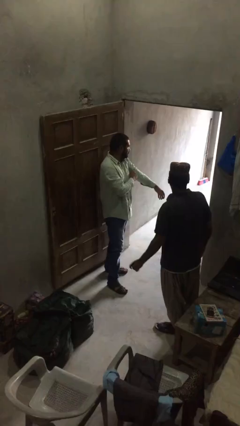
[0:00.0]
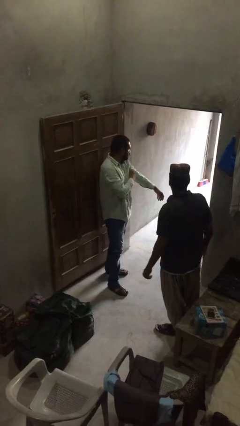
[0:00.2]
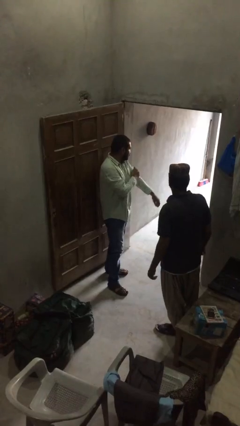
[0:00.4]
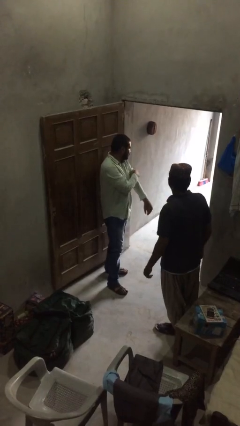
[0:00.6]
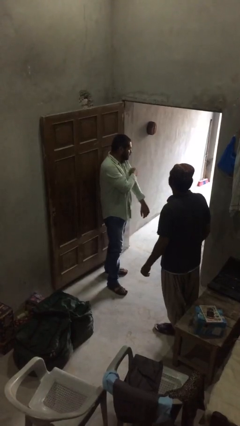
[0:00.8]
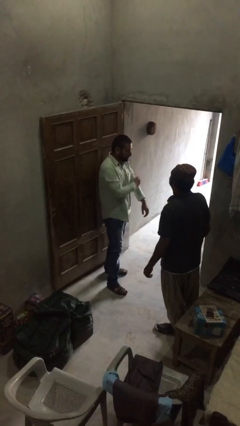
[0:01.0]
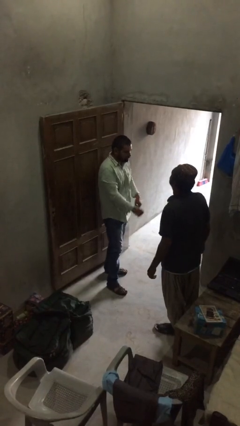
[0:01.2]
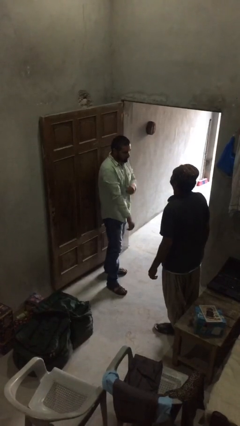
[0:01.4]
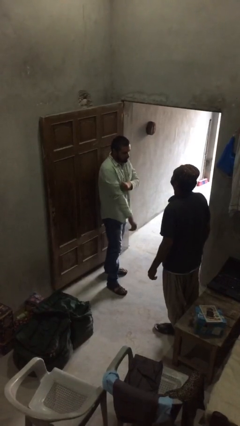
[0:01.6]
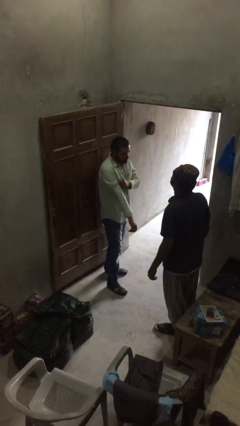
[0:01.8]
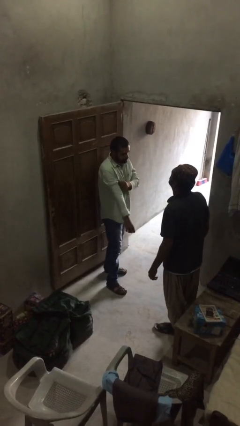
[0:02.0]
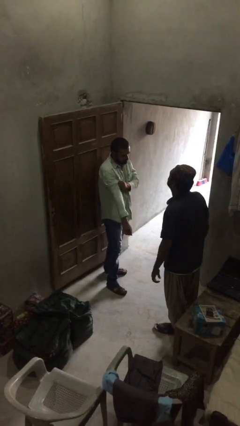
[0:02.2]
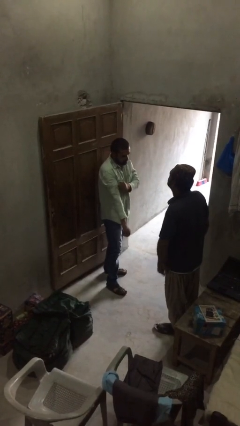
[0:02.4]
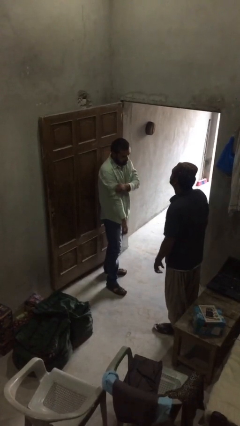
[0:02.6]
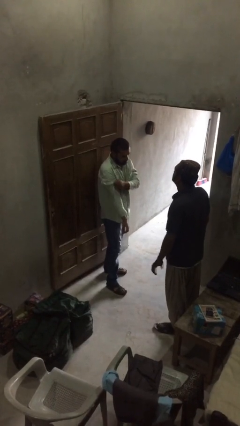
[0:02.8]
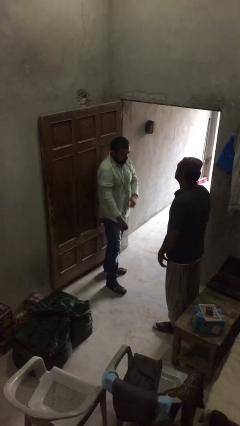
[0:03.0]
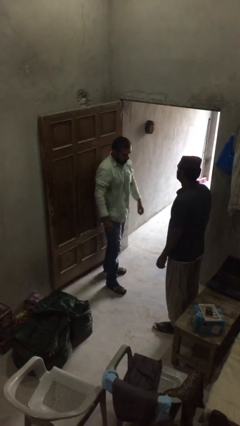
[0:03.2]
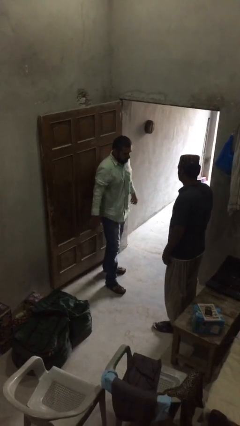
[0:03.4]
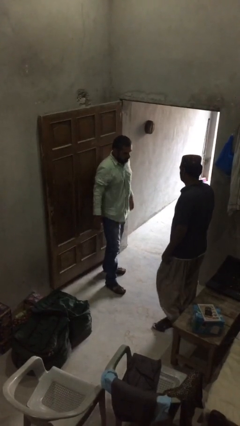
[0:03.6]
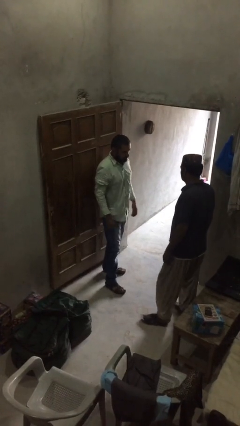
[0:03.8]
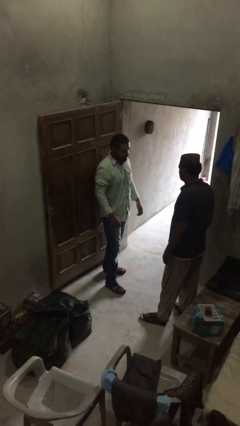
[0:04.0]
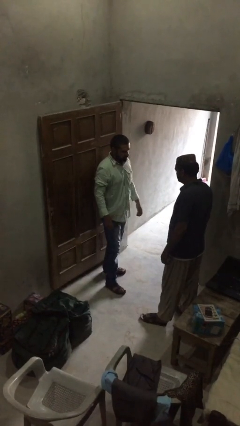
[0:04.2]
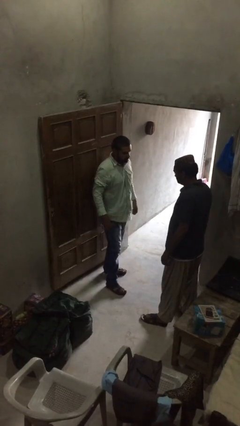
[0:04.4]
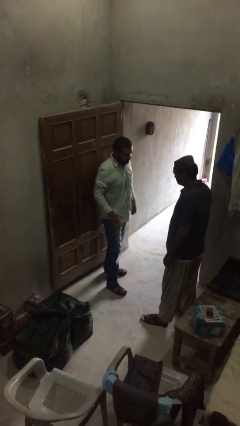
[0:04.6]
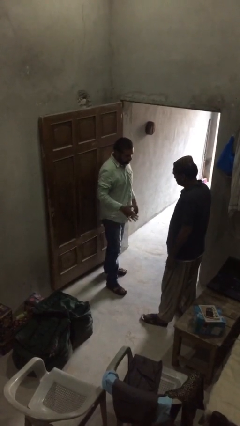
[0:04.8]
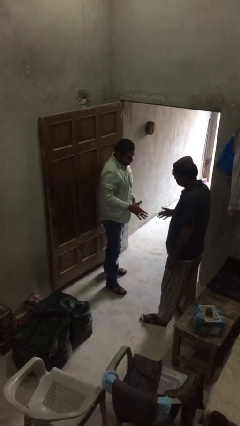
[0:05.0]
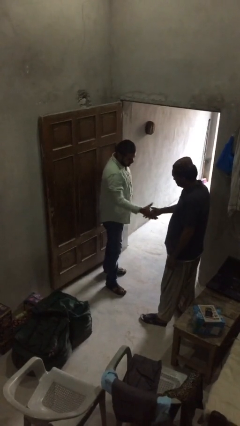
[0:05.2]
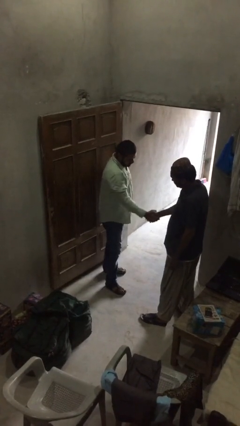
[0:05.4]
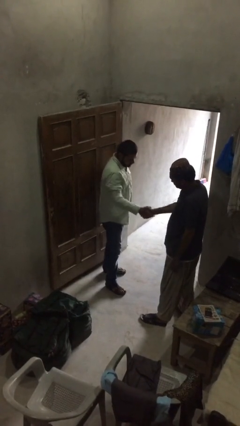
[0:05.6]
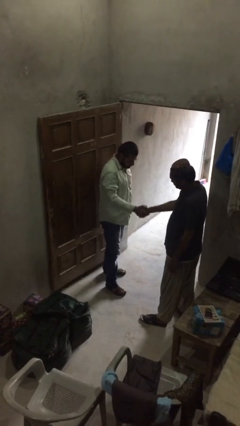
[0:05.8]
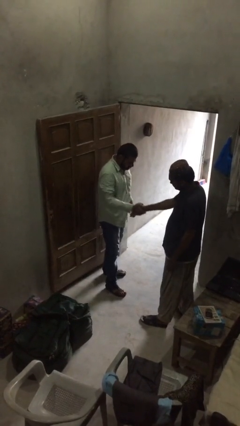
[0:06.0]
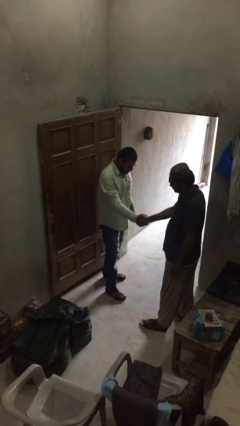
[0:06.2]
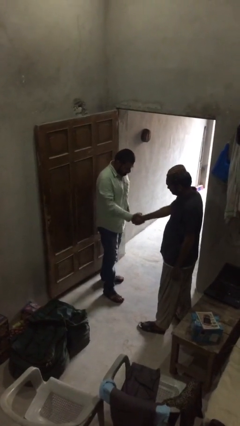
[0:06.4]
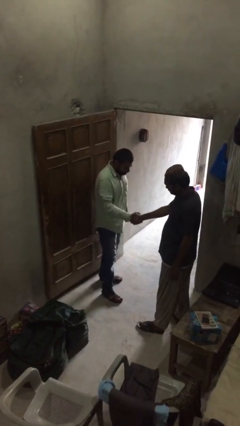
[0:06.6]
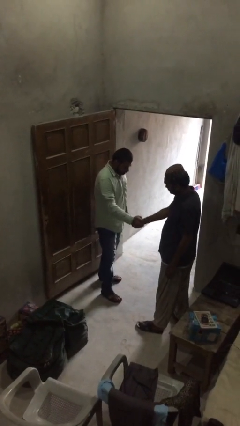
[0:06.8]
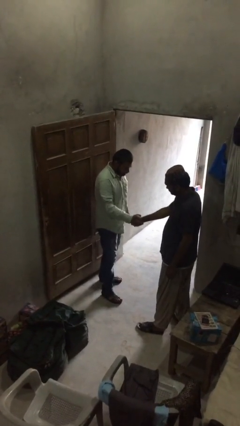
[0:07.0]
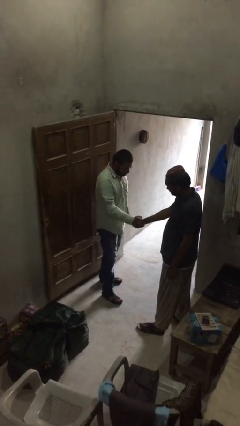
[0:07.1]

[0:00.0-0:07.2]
person shakes hand

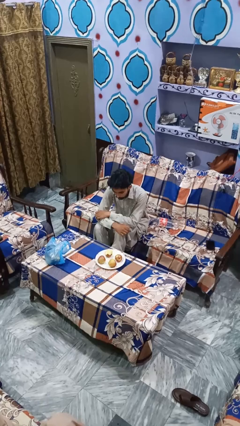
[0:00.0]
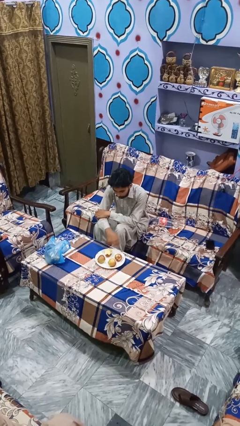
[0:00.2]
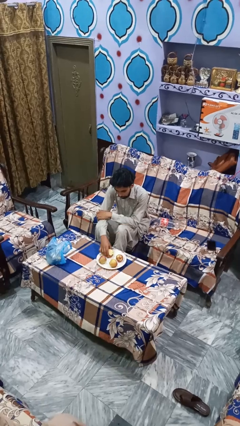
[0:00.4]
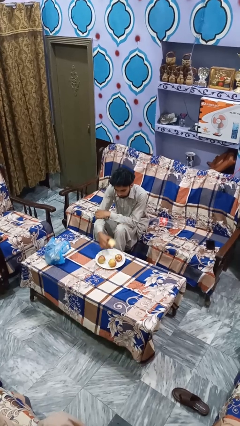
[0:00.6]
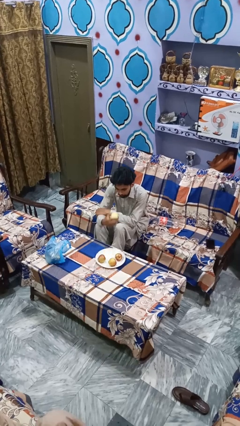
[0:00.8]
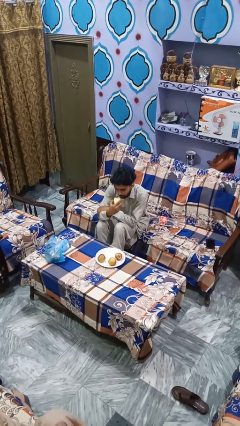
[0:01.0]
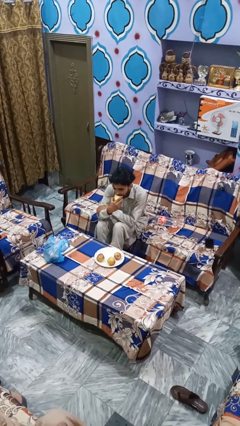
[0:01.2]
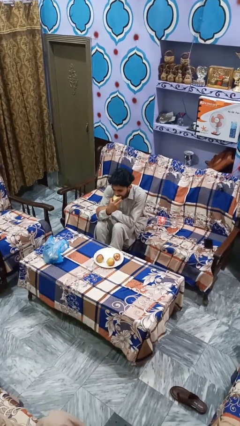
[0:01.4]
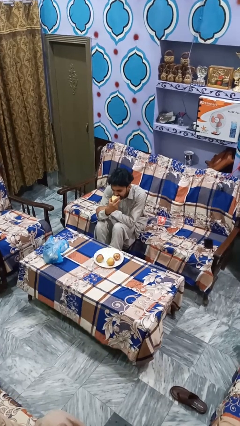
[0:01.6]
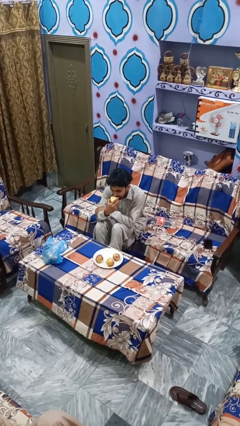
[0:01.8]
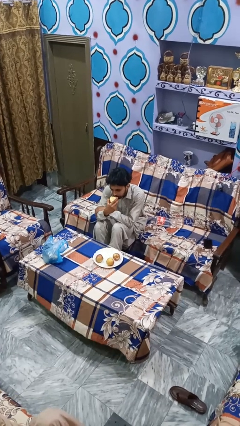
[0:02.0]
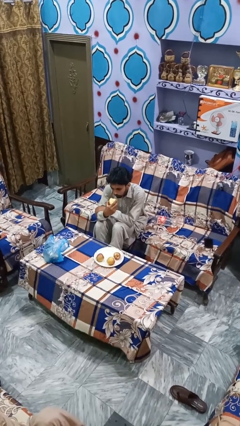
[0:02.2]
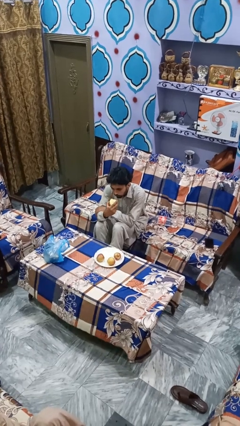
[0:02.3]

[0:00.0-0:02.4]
person eats apple

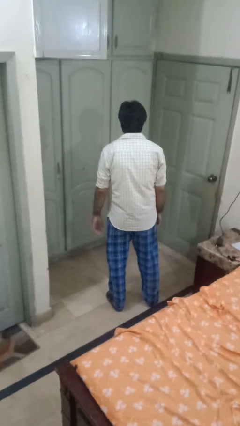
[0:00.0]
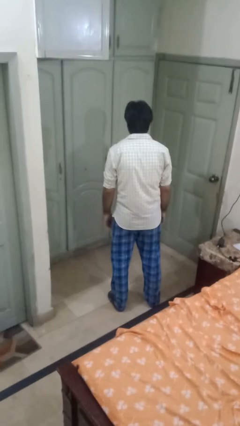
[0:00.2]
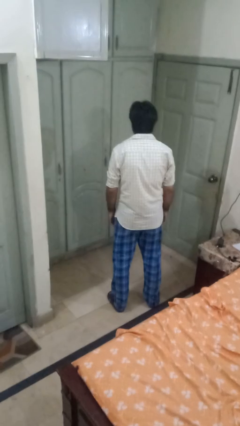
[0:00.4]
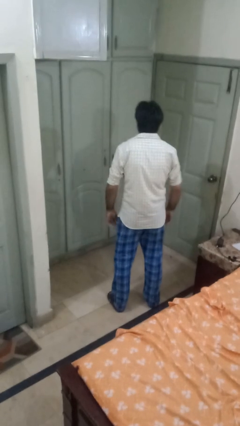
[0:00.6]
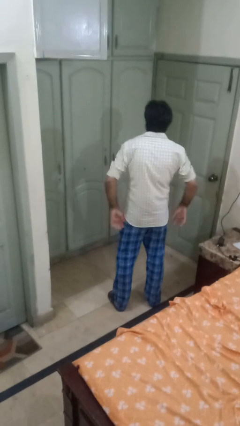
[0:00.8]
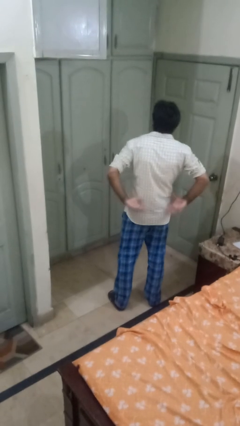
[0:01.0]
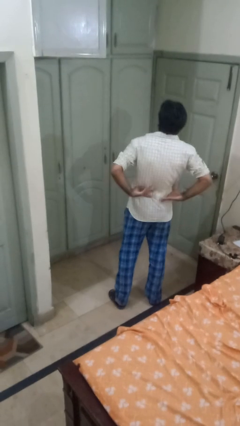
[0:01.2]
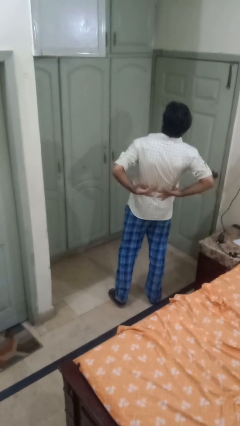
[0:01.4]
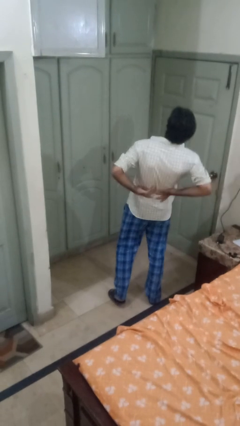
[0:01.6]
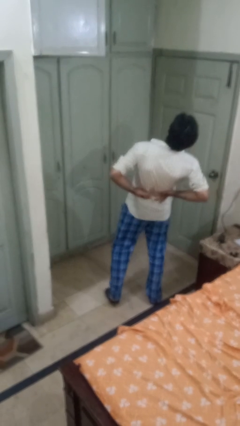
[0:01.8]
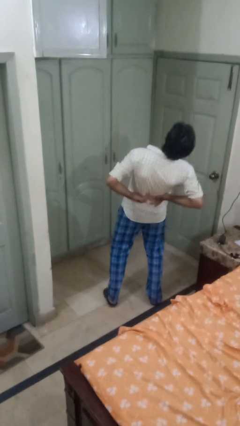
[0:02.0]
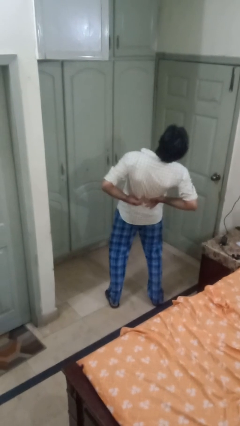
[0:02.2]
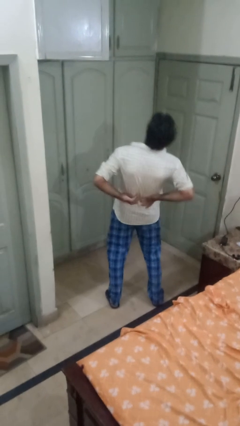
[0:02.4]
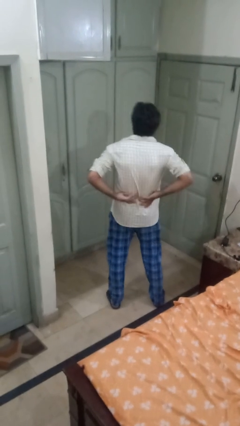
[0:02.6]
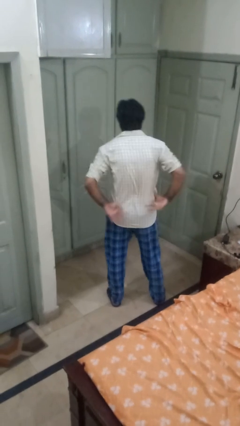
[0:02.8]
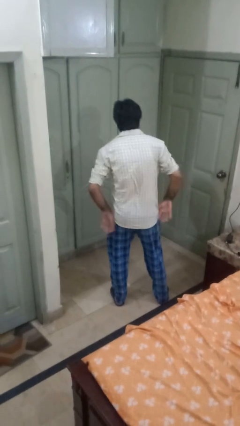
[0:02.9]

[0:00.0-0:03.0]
person stretches back

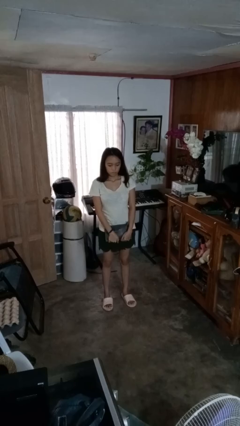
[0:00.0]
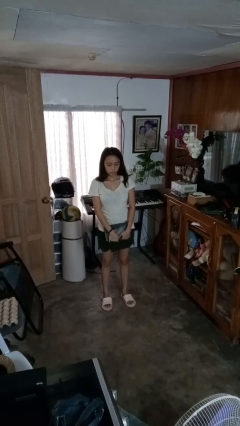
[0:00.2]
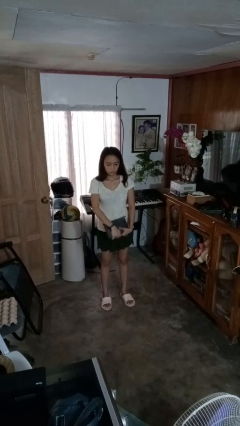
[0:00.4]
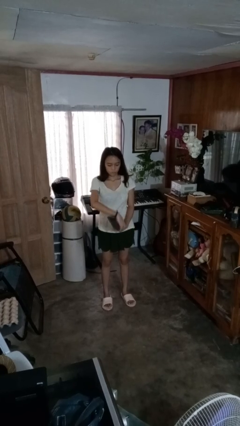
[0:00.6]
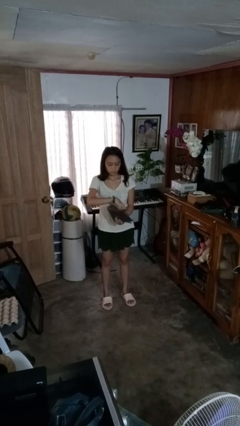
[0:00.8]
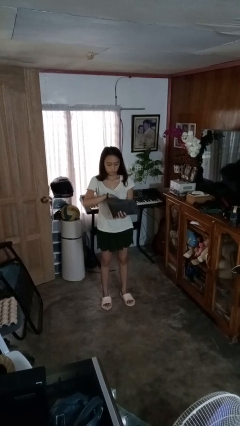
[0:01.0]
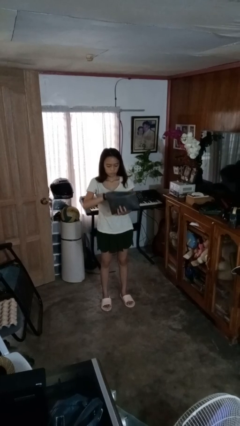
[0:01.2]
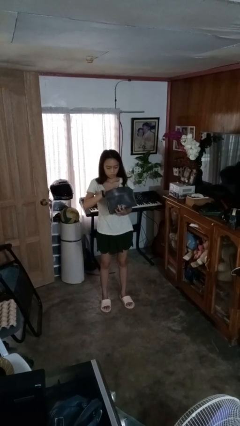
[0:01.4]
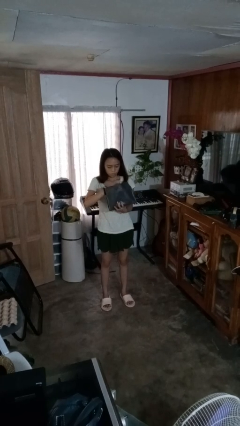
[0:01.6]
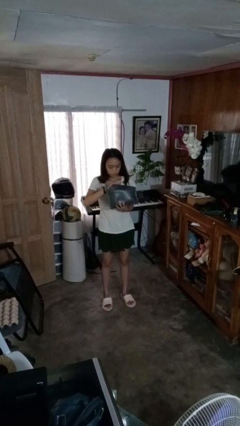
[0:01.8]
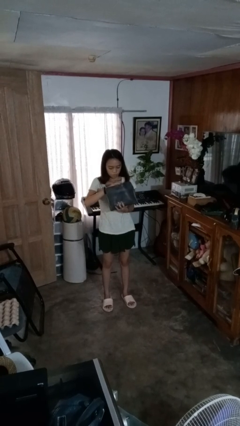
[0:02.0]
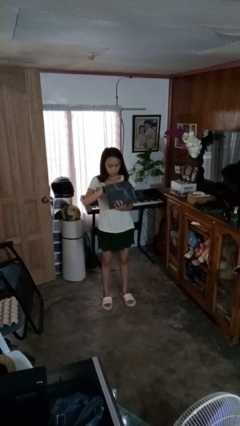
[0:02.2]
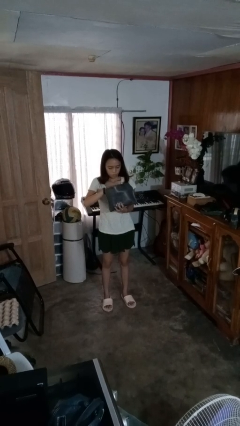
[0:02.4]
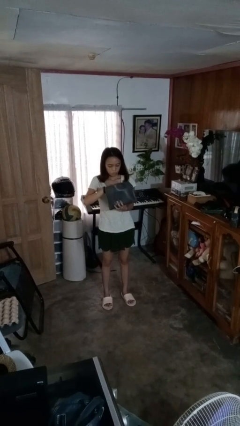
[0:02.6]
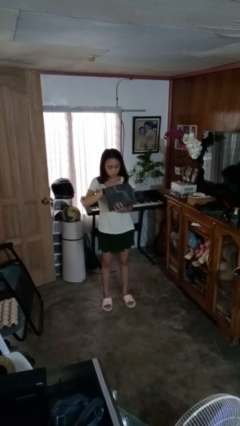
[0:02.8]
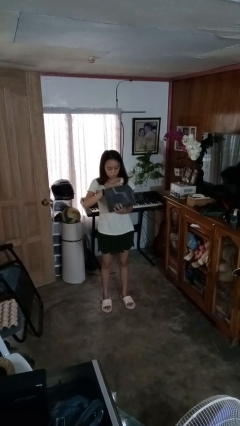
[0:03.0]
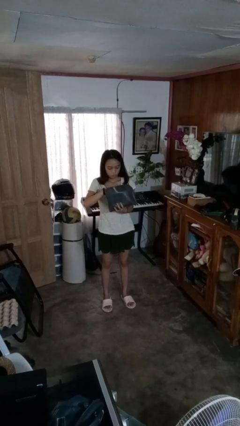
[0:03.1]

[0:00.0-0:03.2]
person searches in purse

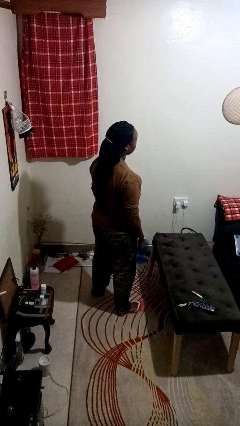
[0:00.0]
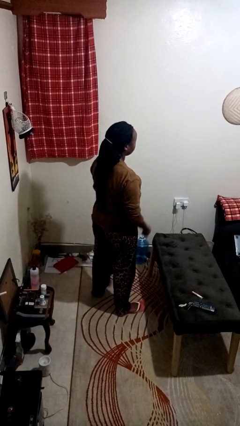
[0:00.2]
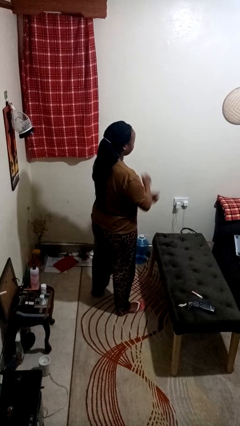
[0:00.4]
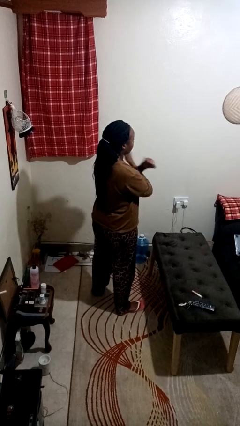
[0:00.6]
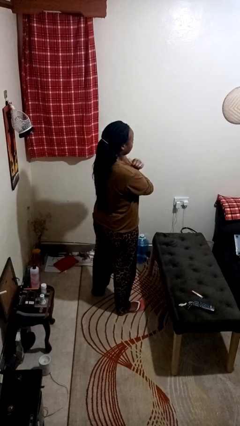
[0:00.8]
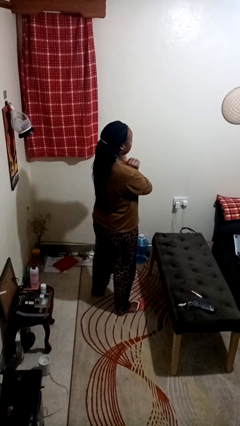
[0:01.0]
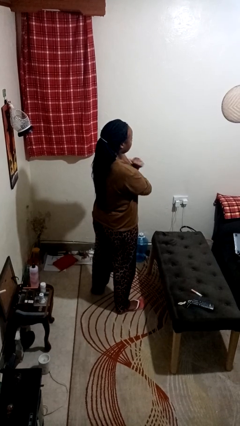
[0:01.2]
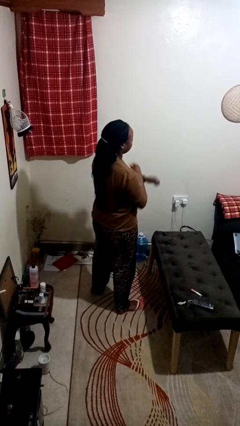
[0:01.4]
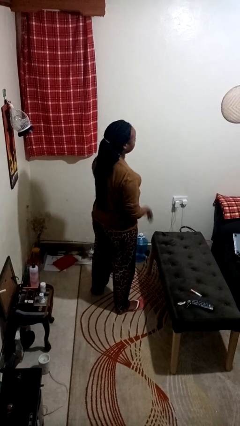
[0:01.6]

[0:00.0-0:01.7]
person gestures arms x

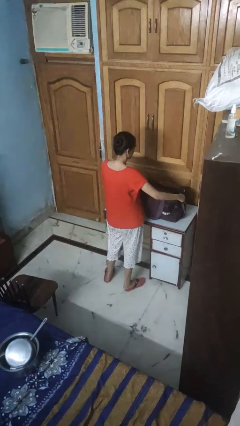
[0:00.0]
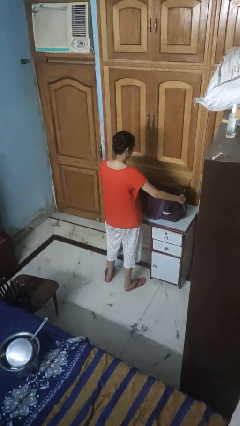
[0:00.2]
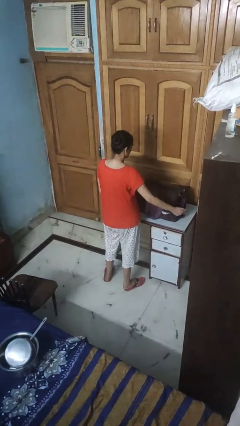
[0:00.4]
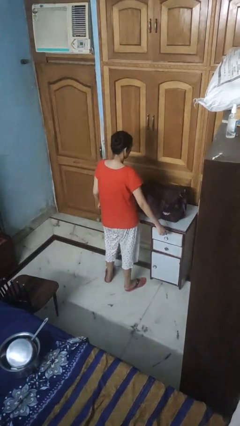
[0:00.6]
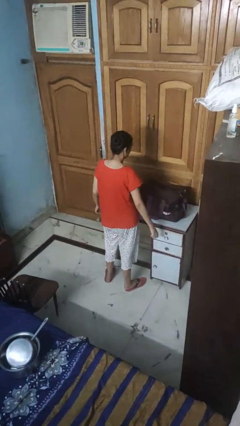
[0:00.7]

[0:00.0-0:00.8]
person opens suitcase
